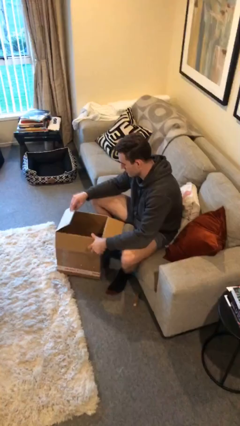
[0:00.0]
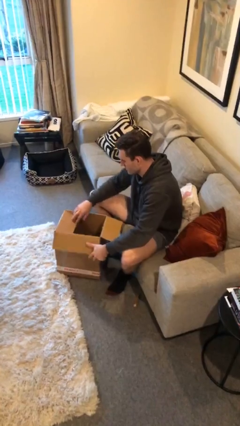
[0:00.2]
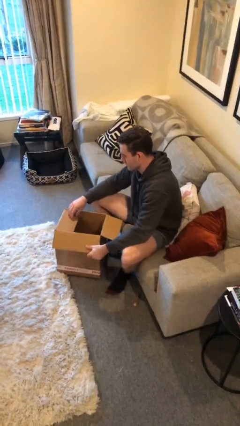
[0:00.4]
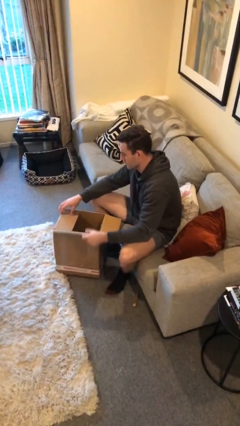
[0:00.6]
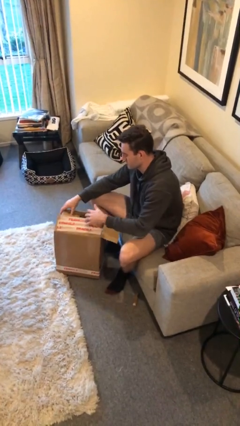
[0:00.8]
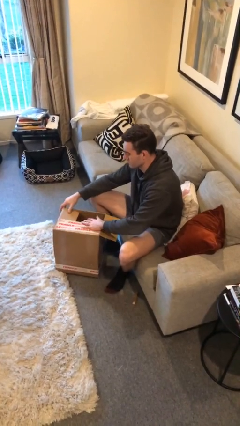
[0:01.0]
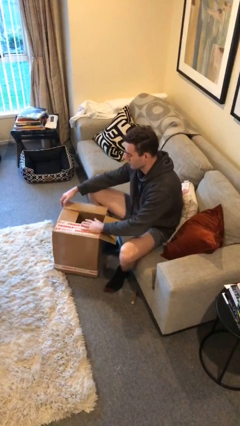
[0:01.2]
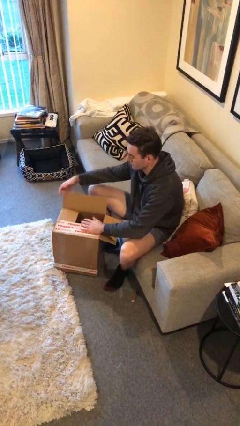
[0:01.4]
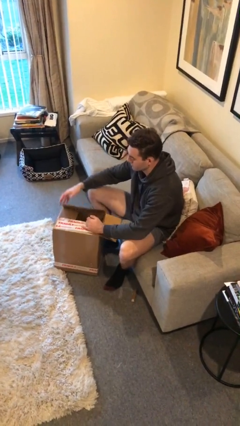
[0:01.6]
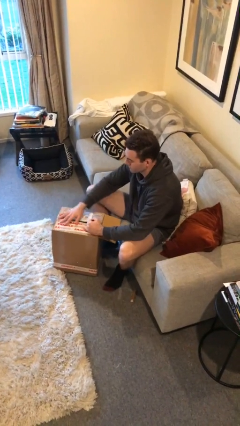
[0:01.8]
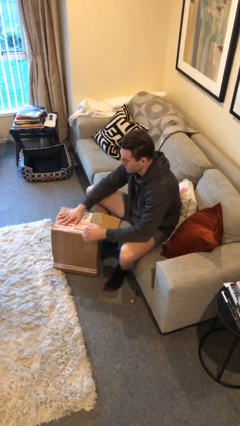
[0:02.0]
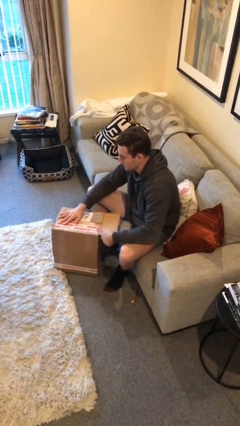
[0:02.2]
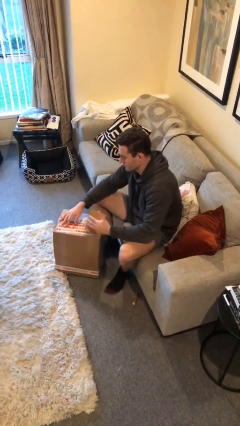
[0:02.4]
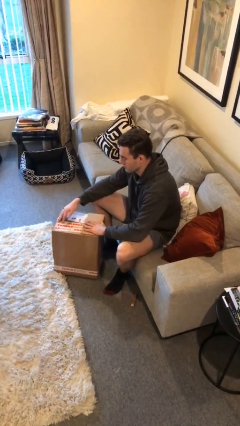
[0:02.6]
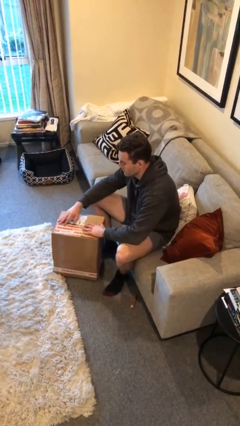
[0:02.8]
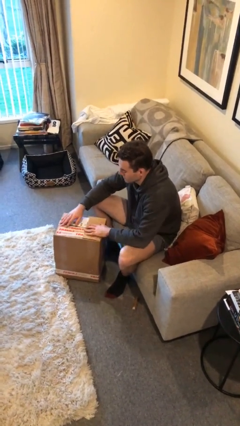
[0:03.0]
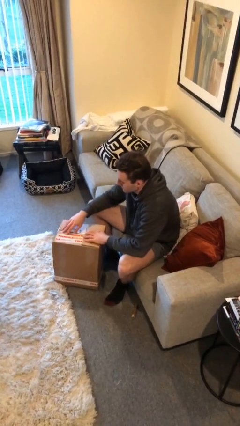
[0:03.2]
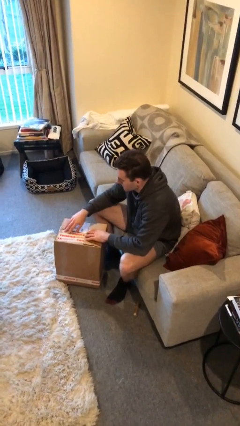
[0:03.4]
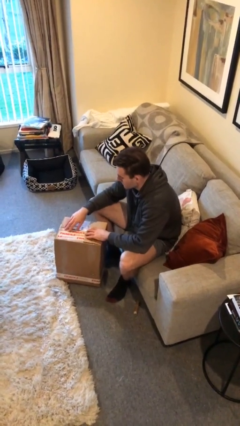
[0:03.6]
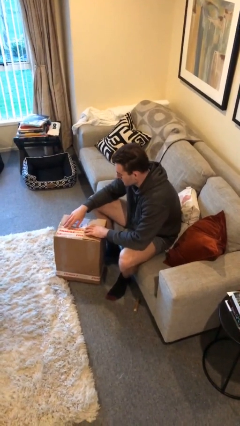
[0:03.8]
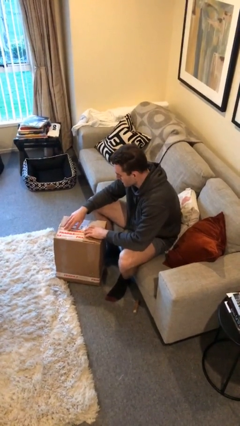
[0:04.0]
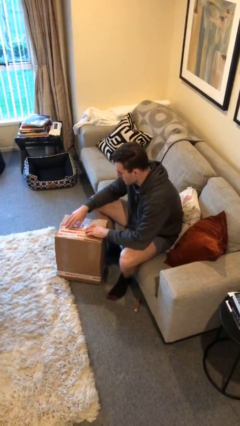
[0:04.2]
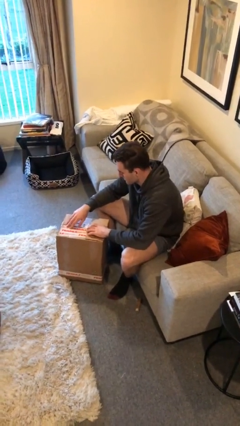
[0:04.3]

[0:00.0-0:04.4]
person closes box

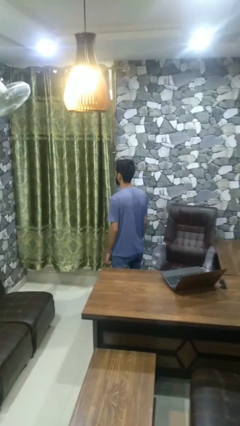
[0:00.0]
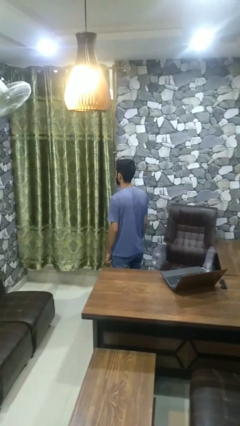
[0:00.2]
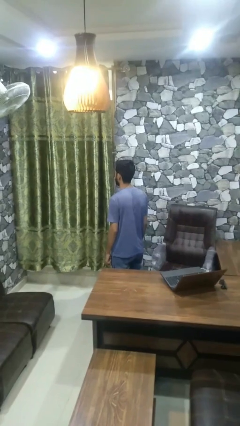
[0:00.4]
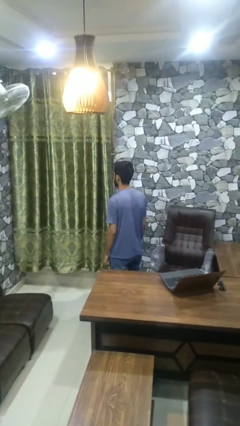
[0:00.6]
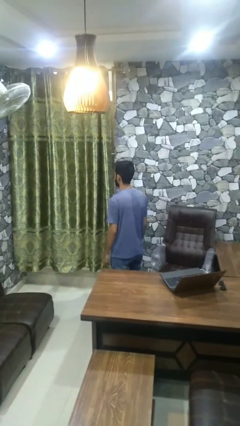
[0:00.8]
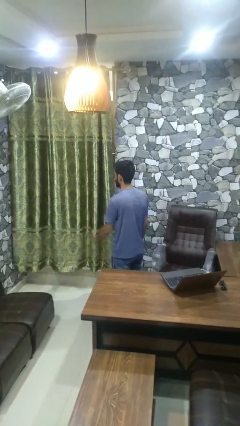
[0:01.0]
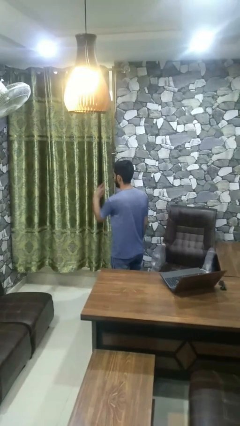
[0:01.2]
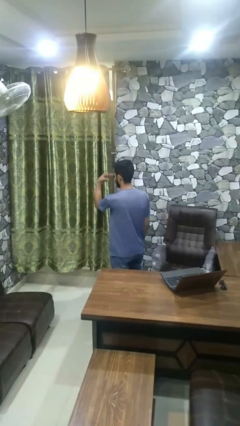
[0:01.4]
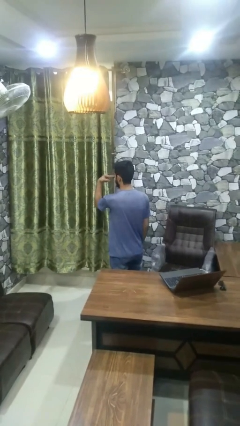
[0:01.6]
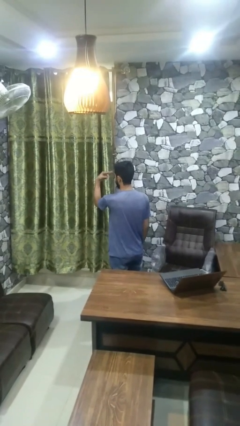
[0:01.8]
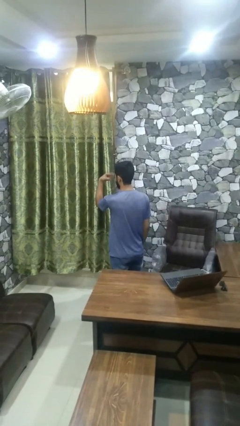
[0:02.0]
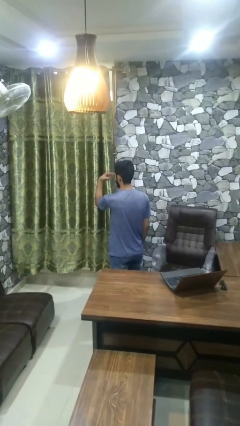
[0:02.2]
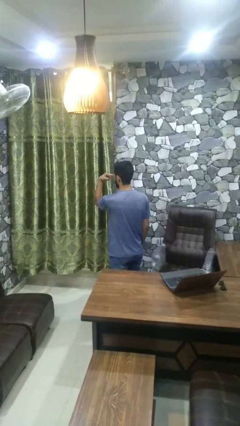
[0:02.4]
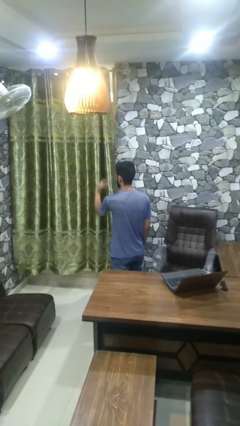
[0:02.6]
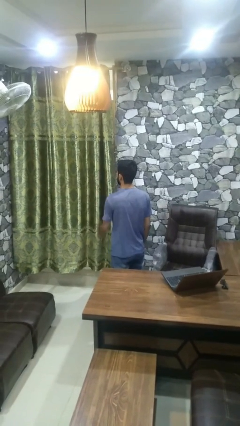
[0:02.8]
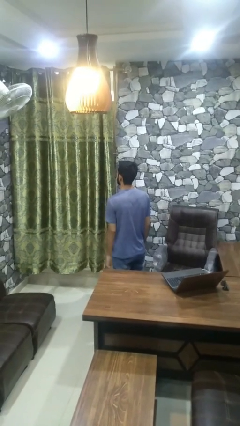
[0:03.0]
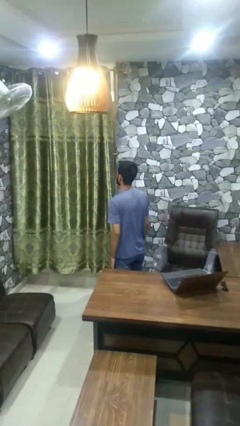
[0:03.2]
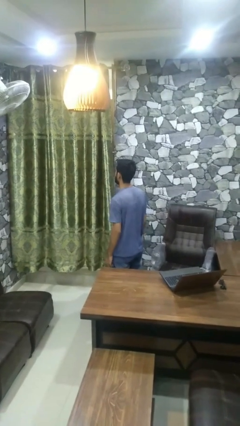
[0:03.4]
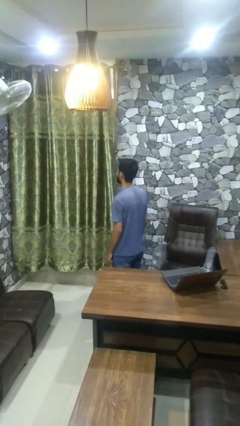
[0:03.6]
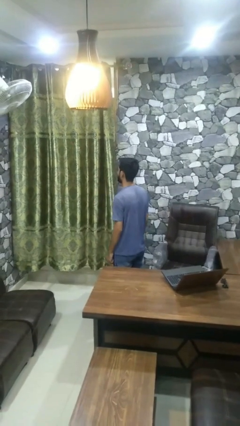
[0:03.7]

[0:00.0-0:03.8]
person gestures watch closely

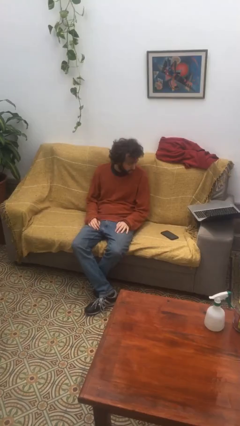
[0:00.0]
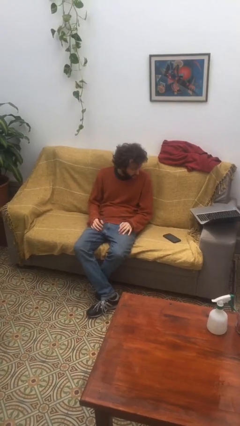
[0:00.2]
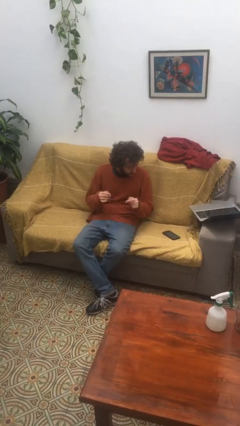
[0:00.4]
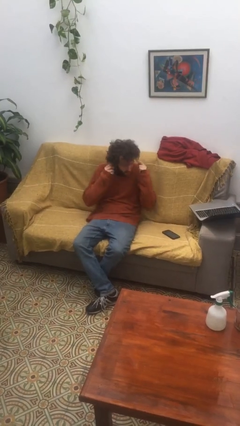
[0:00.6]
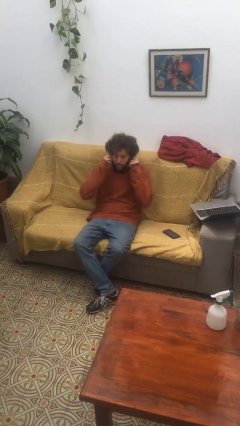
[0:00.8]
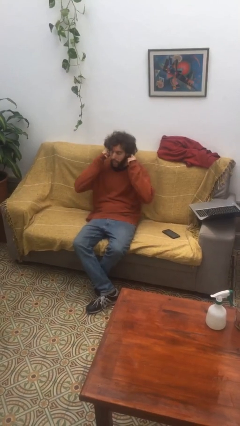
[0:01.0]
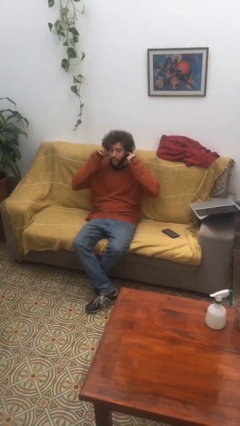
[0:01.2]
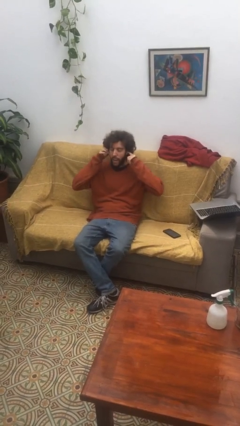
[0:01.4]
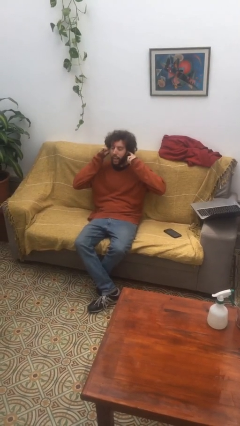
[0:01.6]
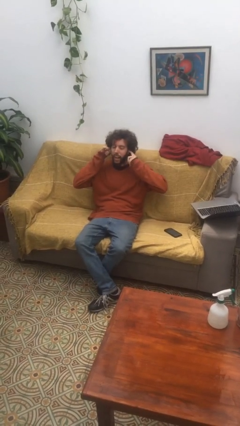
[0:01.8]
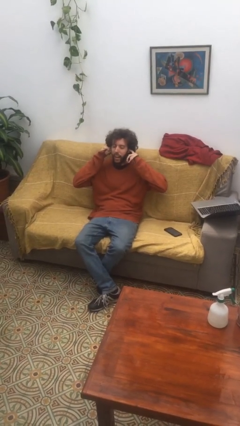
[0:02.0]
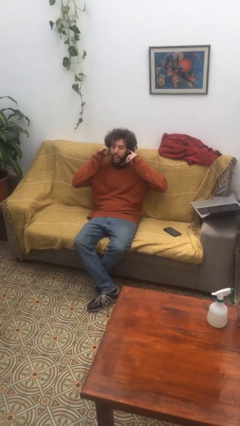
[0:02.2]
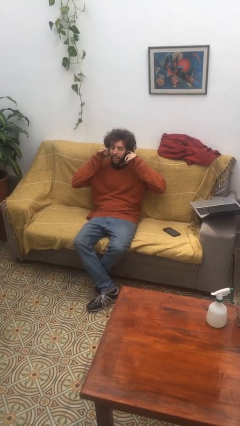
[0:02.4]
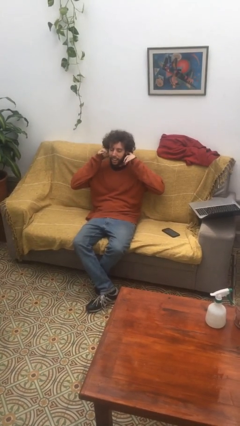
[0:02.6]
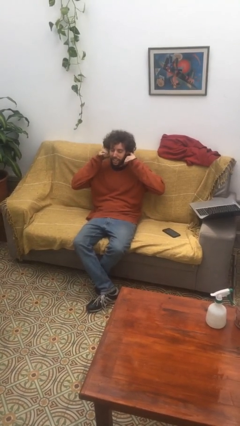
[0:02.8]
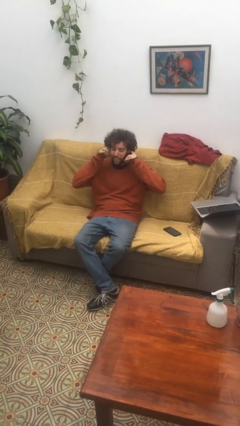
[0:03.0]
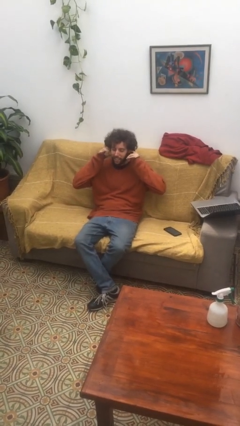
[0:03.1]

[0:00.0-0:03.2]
person puts fingers in ear

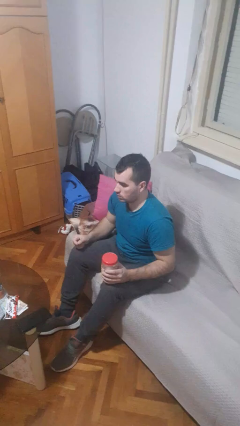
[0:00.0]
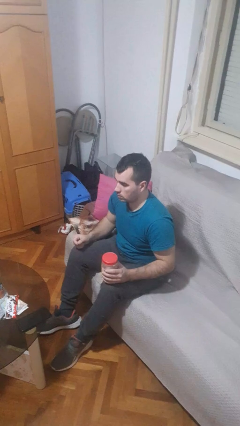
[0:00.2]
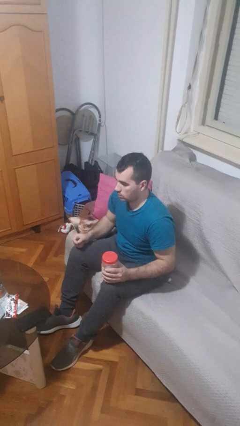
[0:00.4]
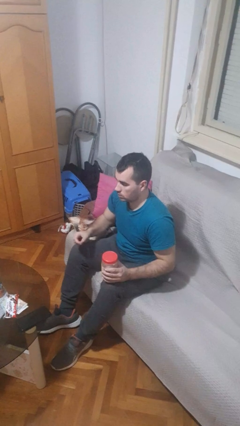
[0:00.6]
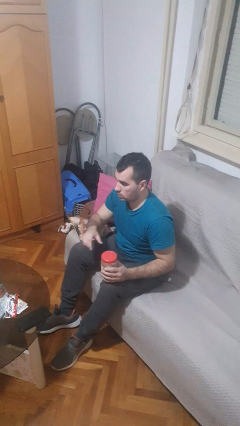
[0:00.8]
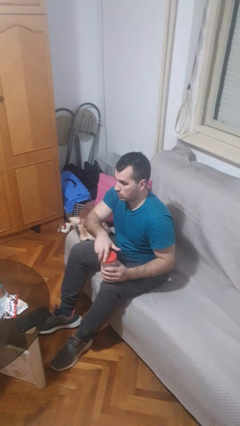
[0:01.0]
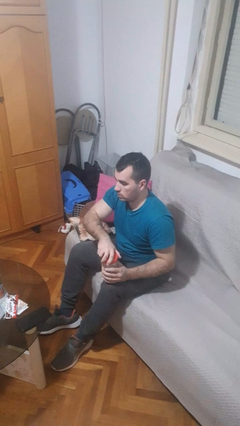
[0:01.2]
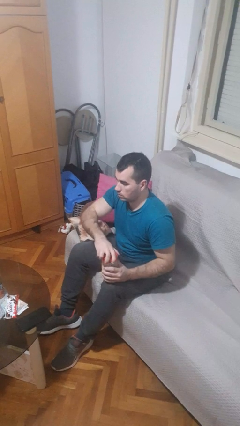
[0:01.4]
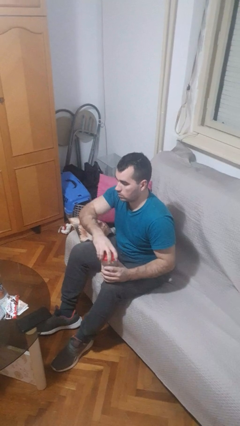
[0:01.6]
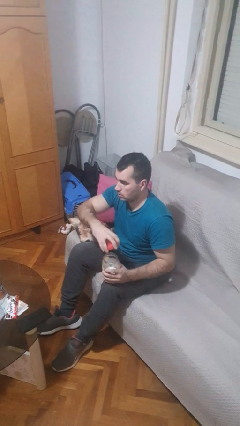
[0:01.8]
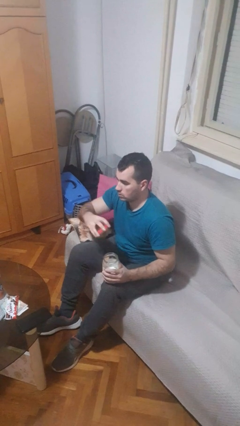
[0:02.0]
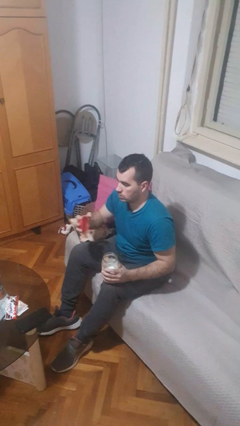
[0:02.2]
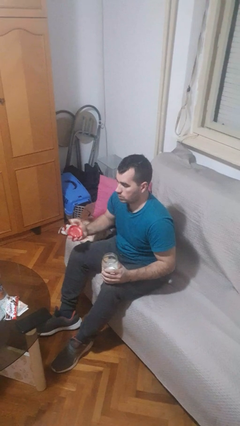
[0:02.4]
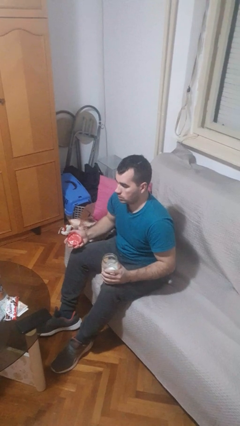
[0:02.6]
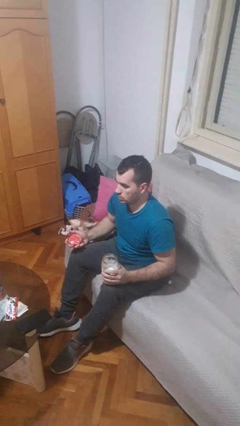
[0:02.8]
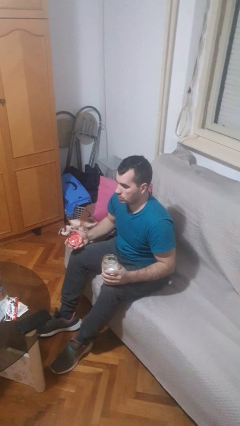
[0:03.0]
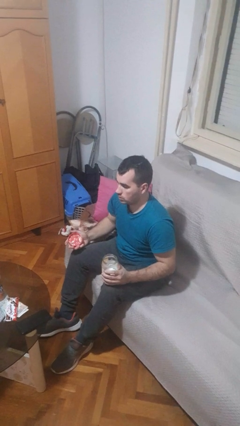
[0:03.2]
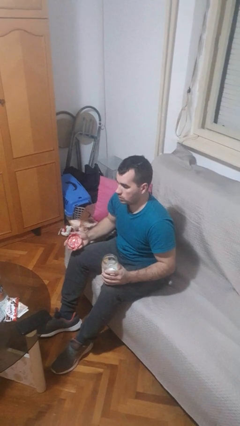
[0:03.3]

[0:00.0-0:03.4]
person opens jar

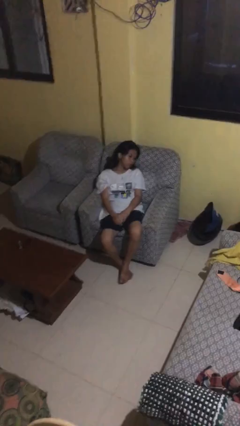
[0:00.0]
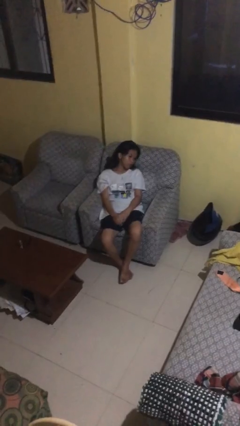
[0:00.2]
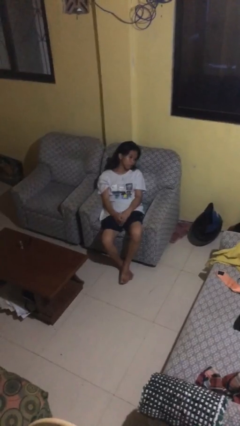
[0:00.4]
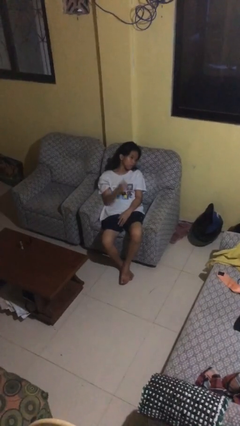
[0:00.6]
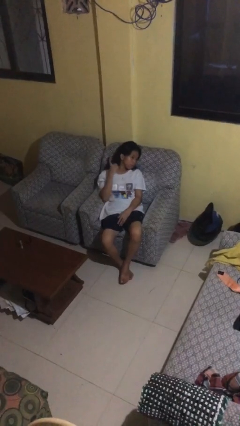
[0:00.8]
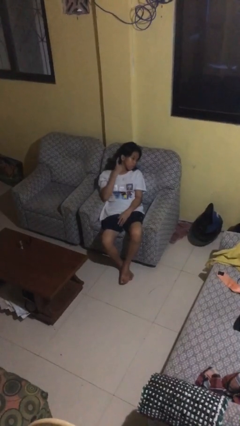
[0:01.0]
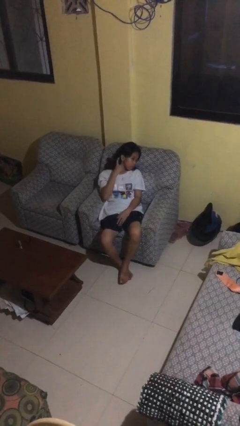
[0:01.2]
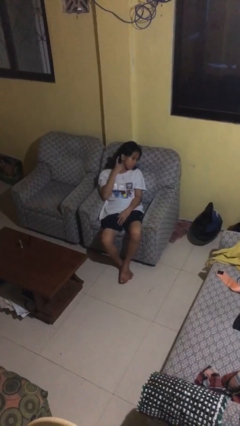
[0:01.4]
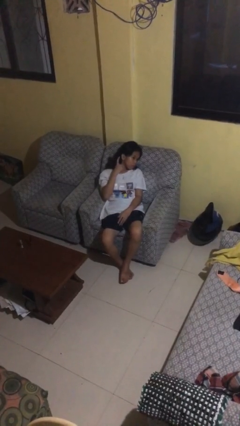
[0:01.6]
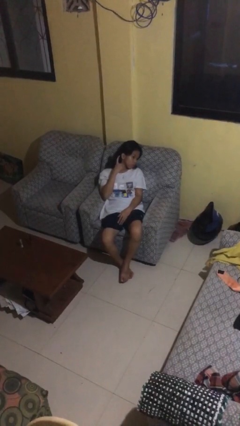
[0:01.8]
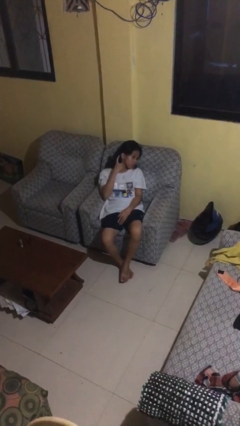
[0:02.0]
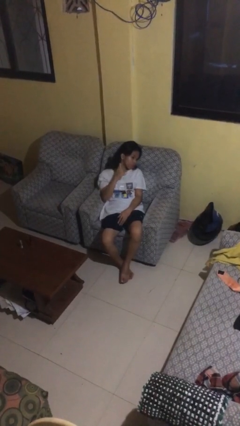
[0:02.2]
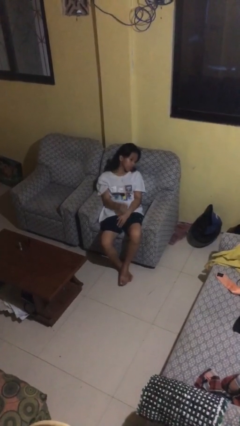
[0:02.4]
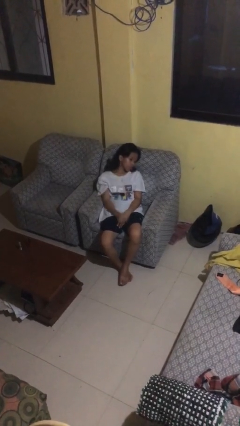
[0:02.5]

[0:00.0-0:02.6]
person gestures listen closely

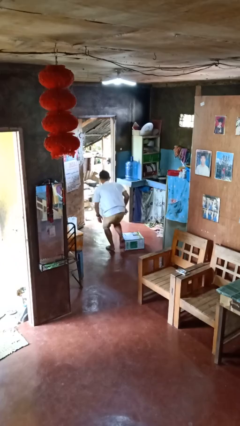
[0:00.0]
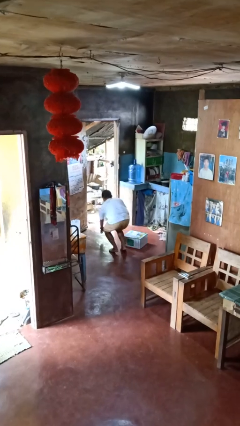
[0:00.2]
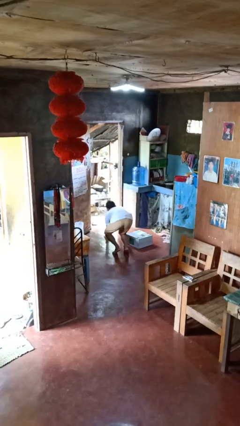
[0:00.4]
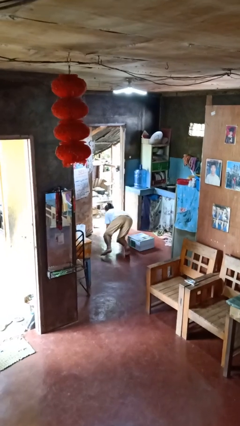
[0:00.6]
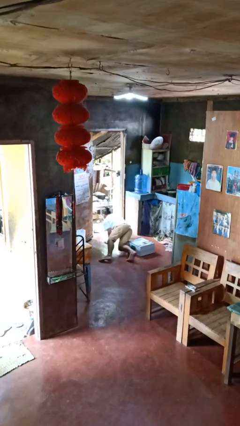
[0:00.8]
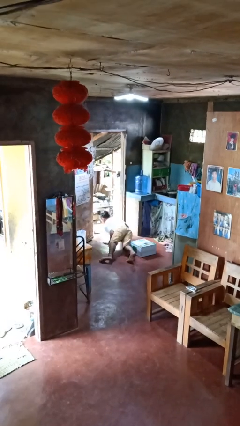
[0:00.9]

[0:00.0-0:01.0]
person trips on object on floor
